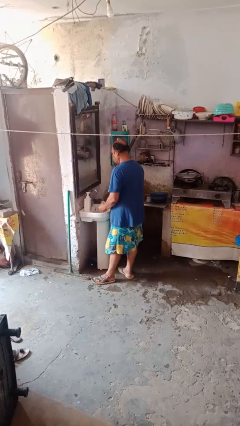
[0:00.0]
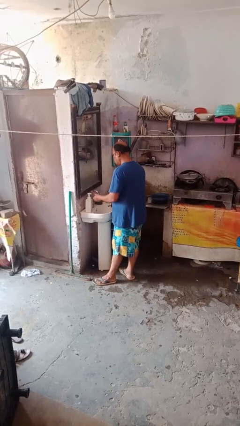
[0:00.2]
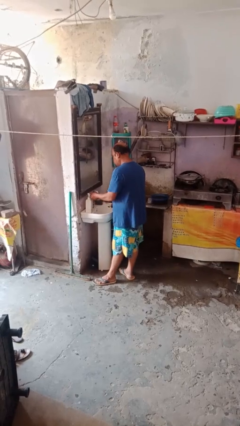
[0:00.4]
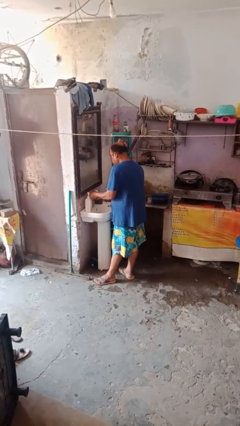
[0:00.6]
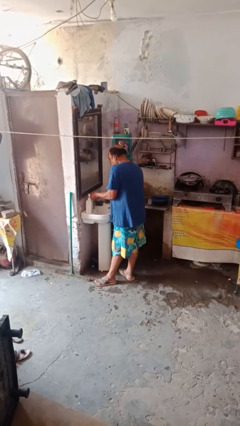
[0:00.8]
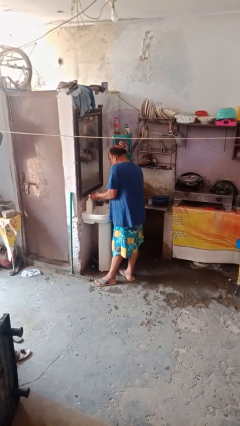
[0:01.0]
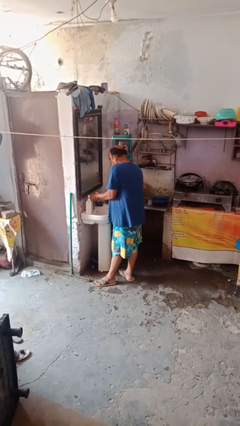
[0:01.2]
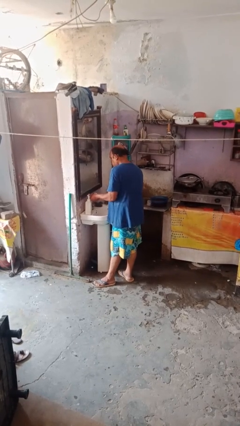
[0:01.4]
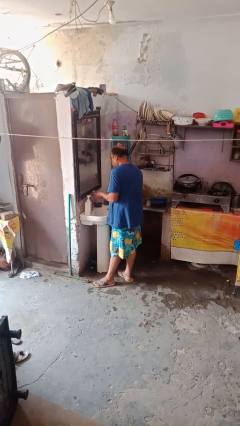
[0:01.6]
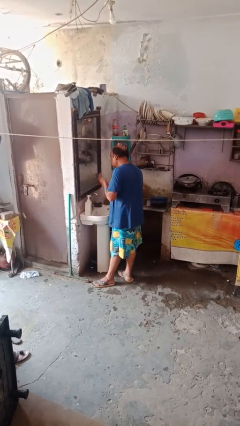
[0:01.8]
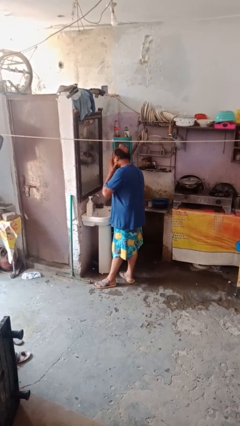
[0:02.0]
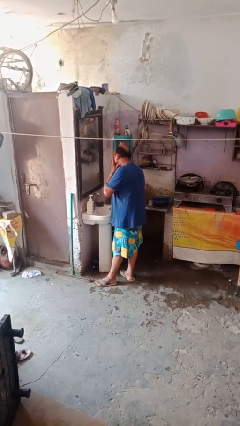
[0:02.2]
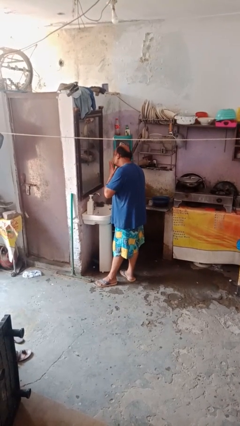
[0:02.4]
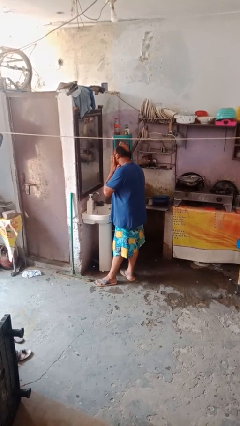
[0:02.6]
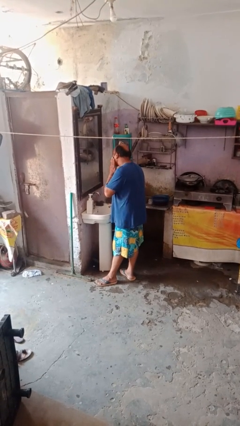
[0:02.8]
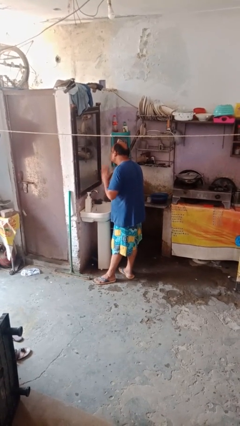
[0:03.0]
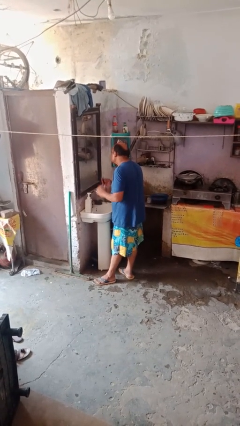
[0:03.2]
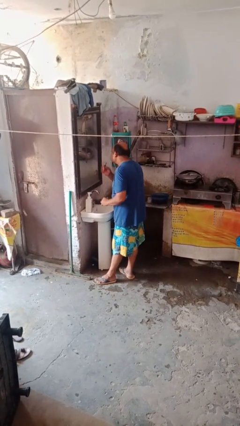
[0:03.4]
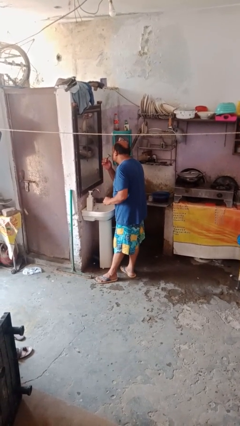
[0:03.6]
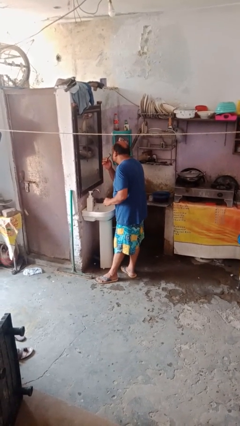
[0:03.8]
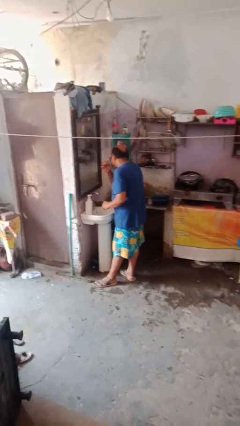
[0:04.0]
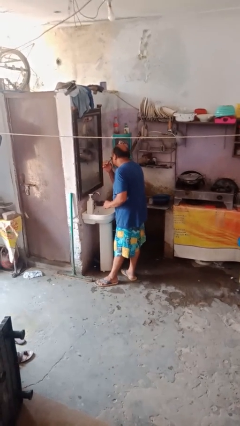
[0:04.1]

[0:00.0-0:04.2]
person applies shaving cream

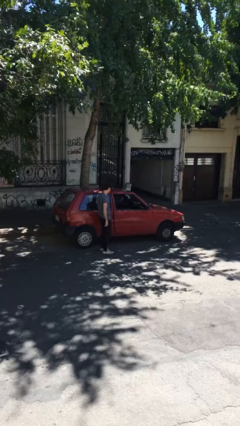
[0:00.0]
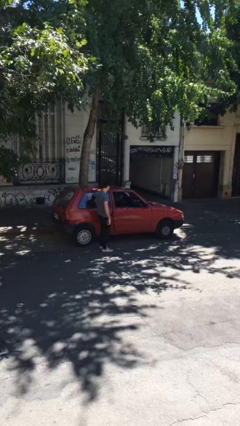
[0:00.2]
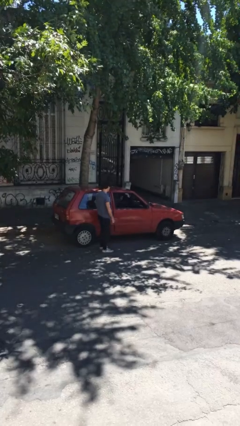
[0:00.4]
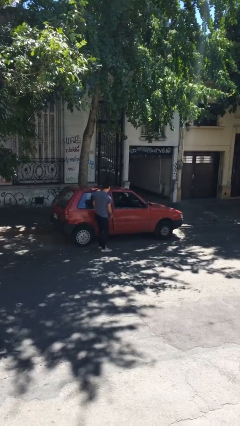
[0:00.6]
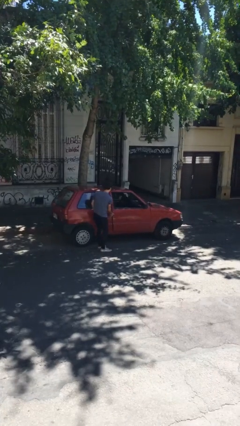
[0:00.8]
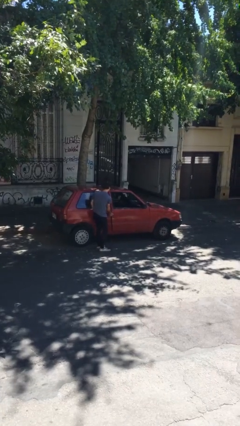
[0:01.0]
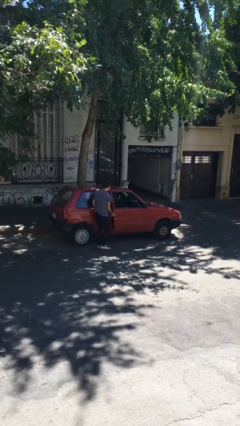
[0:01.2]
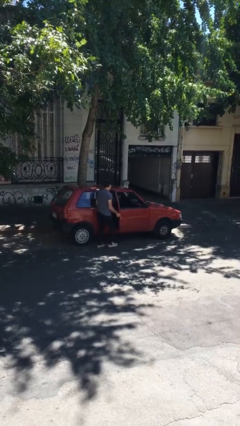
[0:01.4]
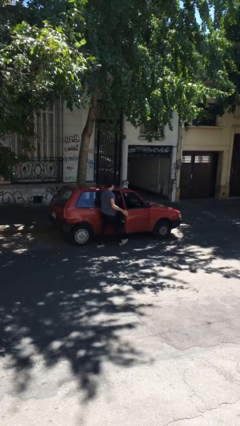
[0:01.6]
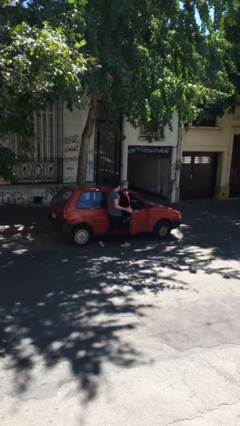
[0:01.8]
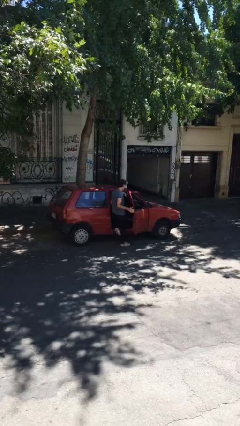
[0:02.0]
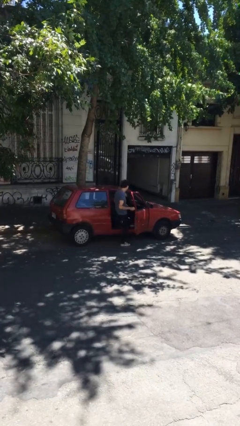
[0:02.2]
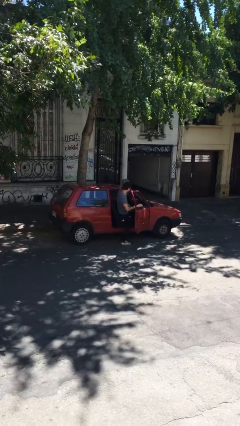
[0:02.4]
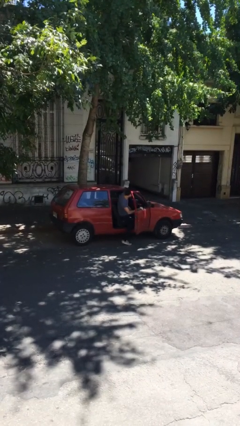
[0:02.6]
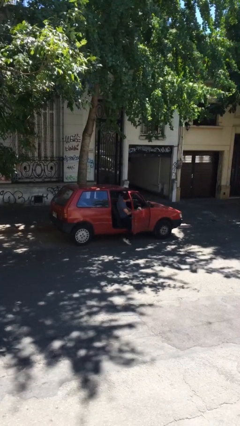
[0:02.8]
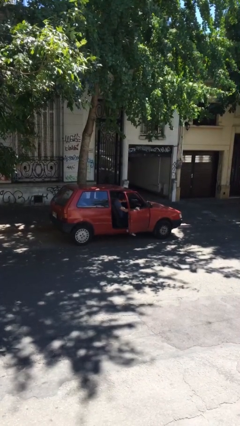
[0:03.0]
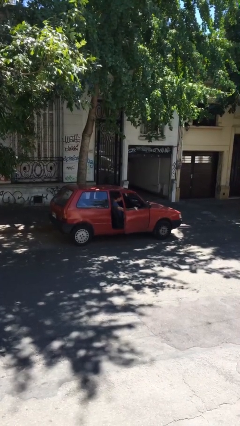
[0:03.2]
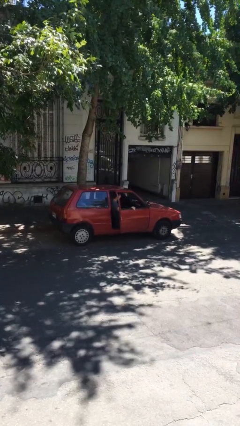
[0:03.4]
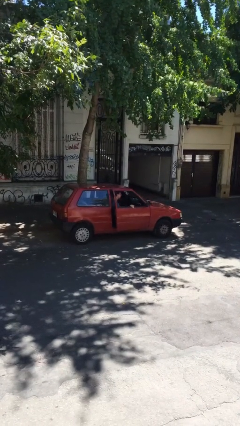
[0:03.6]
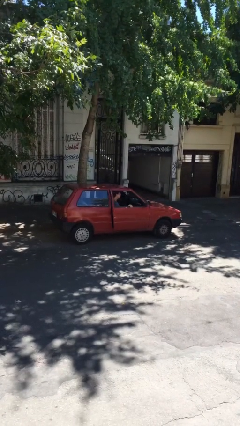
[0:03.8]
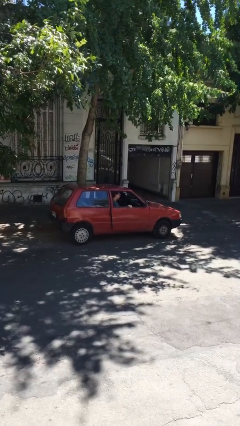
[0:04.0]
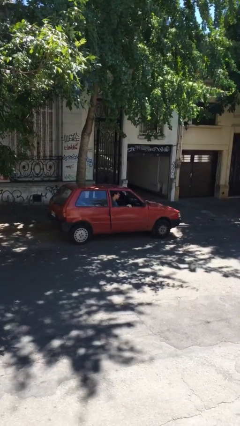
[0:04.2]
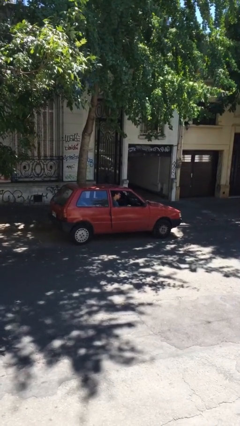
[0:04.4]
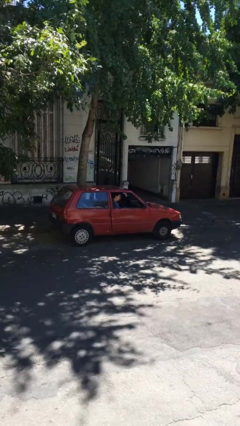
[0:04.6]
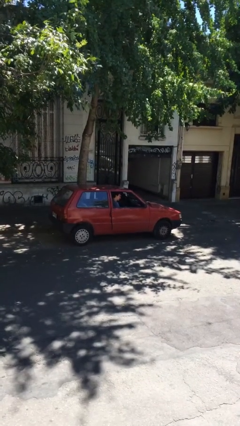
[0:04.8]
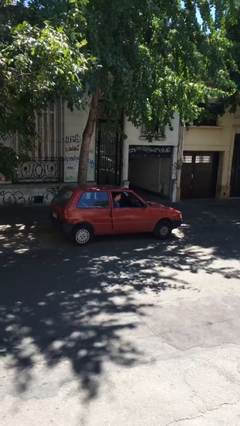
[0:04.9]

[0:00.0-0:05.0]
car picks up person

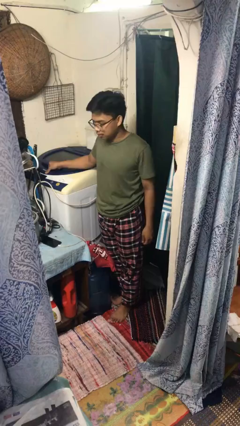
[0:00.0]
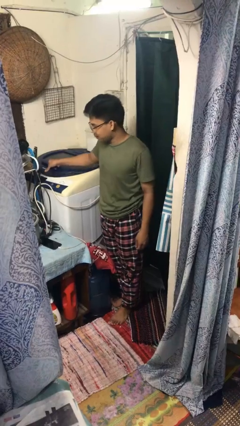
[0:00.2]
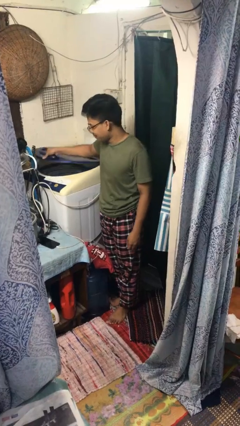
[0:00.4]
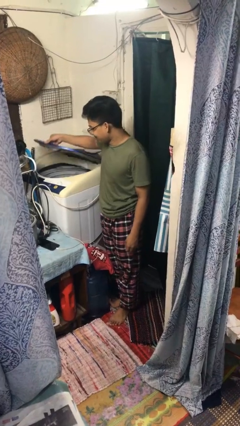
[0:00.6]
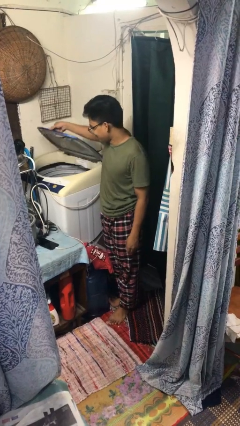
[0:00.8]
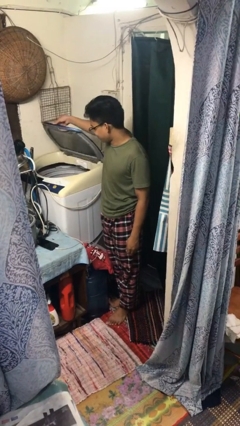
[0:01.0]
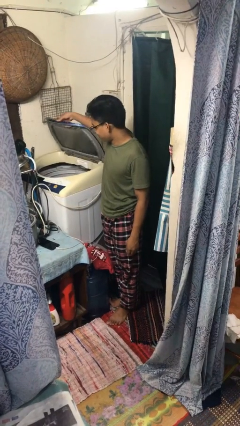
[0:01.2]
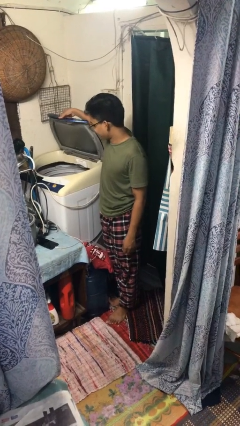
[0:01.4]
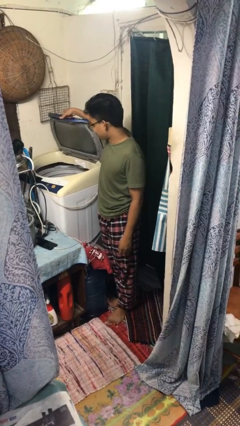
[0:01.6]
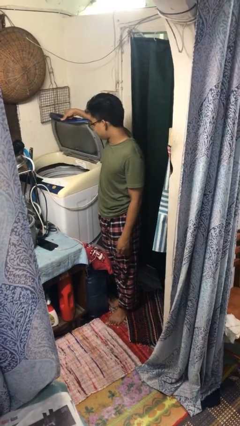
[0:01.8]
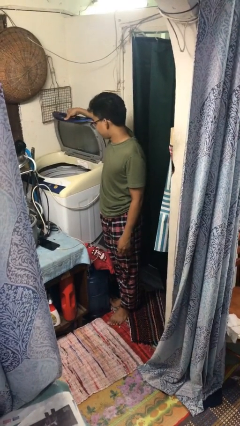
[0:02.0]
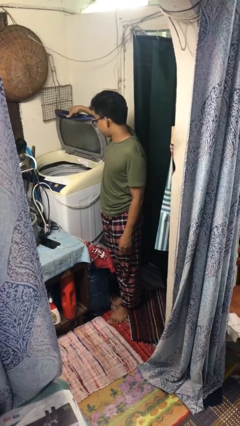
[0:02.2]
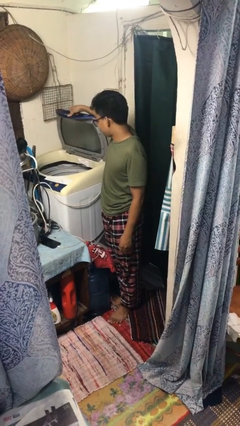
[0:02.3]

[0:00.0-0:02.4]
person opens clothes washer

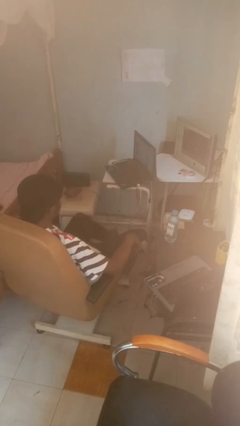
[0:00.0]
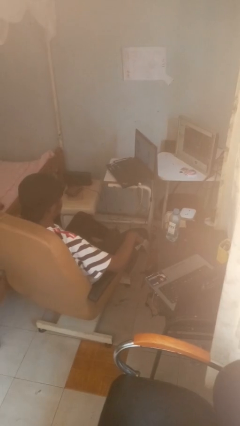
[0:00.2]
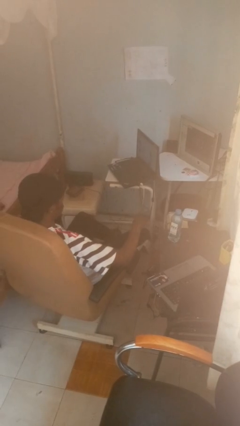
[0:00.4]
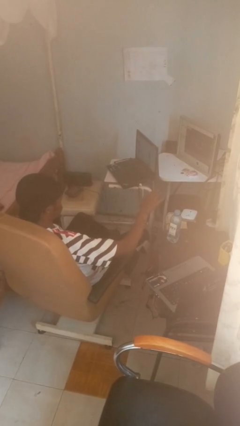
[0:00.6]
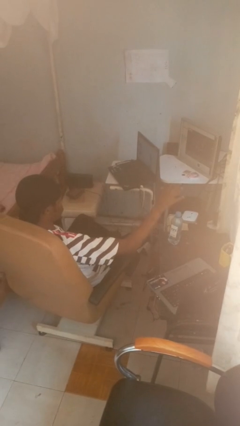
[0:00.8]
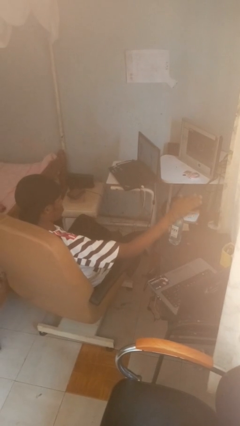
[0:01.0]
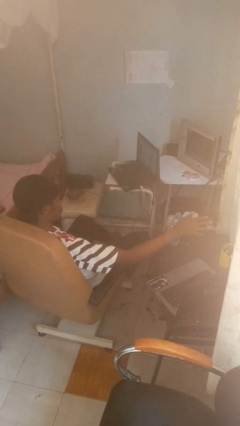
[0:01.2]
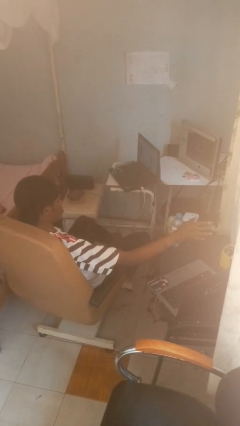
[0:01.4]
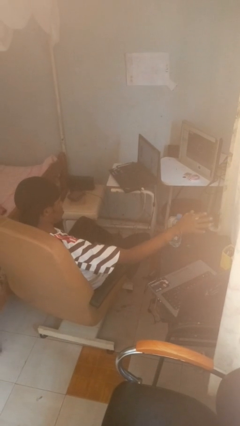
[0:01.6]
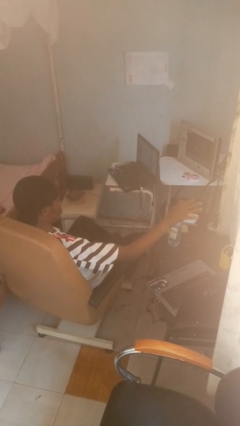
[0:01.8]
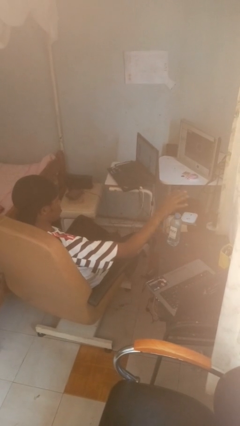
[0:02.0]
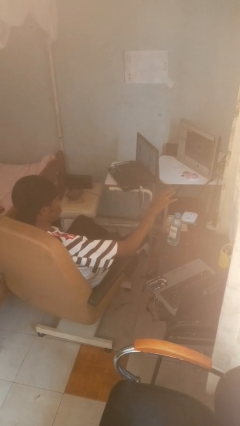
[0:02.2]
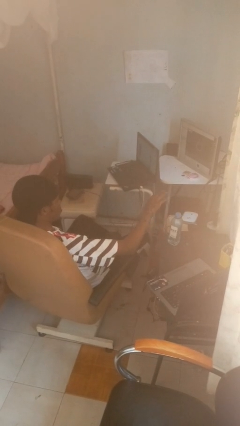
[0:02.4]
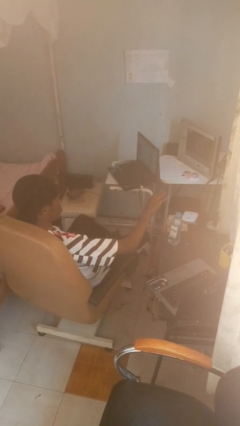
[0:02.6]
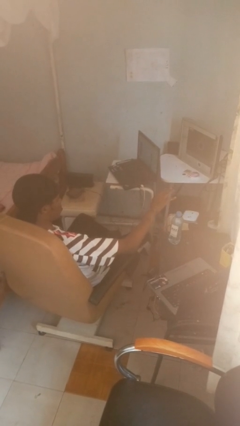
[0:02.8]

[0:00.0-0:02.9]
person waves hand over object

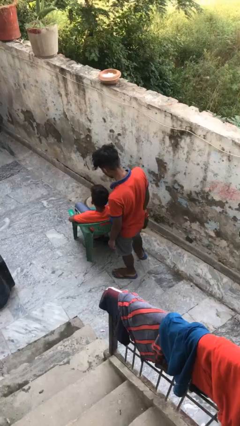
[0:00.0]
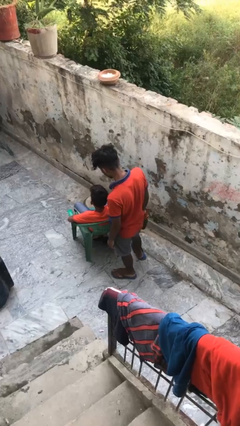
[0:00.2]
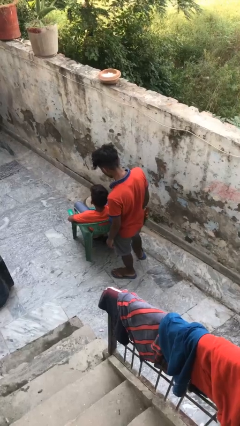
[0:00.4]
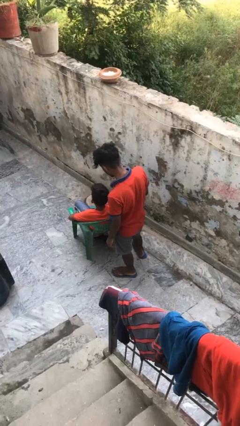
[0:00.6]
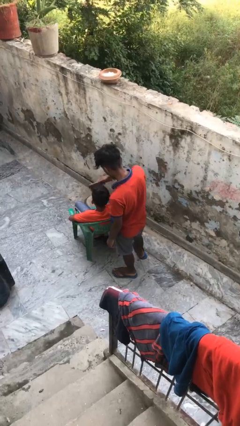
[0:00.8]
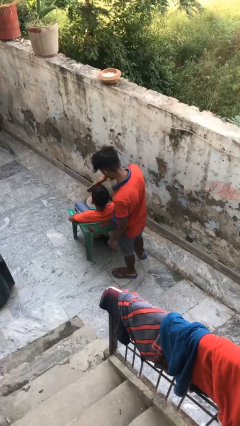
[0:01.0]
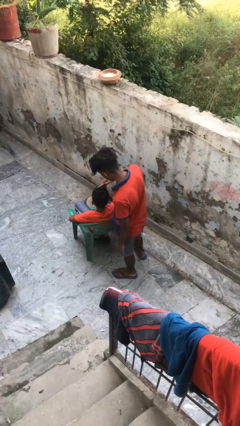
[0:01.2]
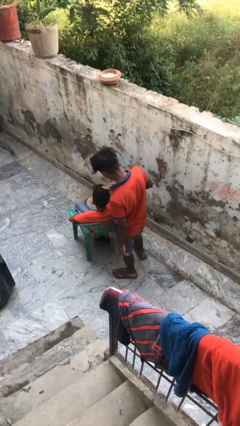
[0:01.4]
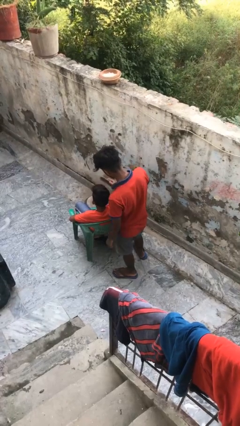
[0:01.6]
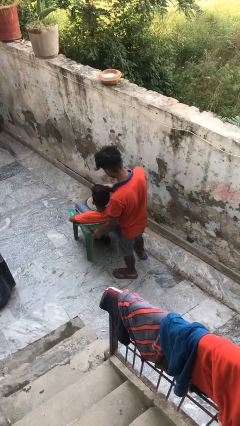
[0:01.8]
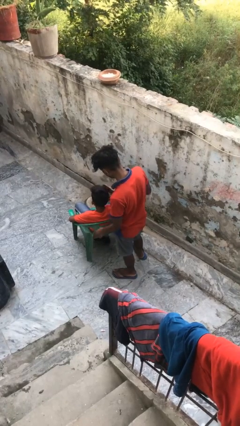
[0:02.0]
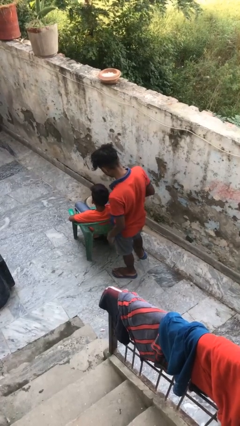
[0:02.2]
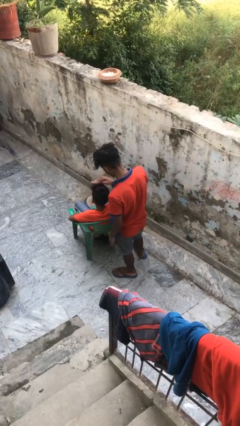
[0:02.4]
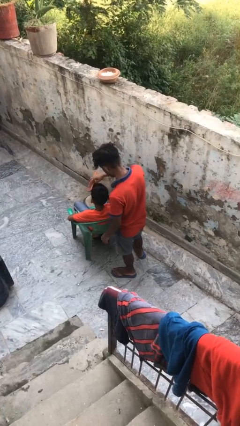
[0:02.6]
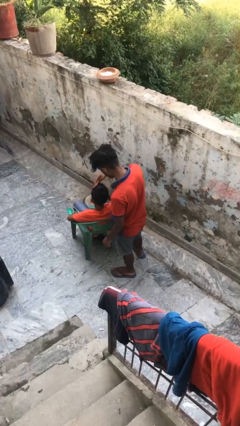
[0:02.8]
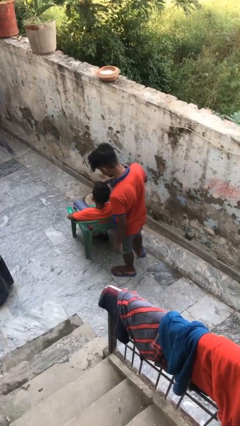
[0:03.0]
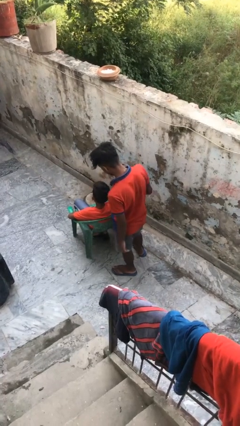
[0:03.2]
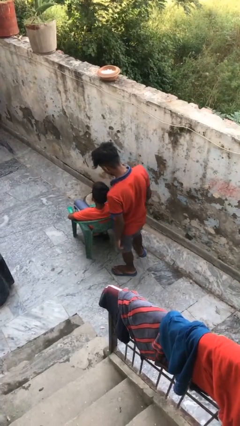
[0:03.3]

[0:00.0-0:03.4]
person brushes hair of person
